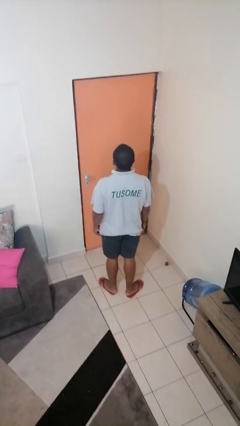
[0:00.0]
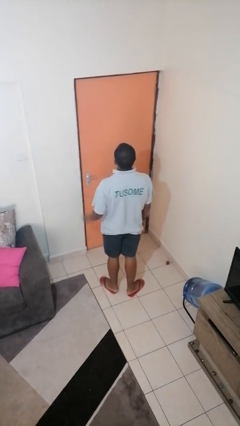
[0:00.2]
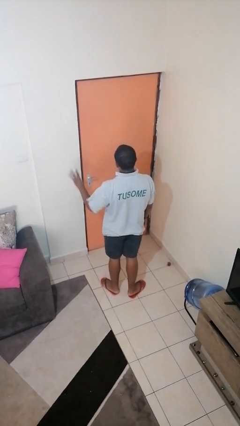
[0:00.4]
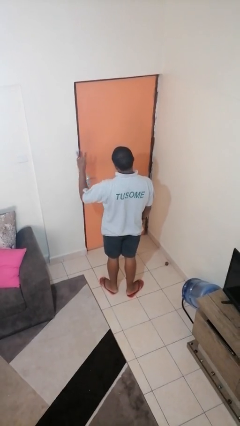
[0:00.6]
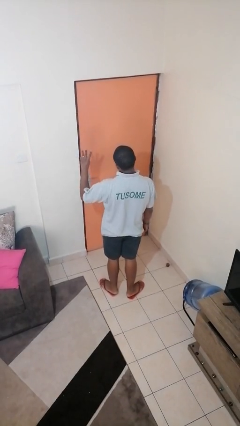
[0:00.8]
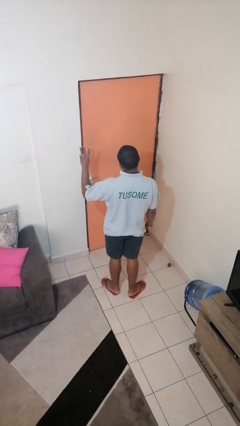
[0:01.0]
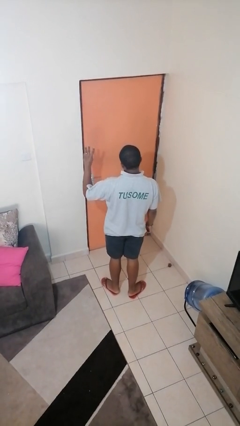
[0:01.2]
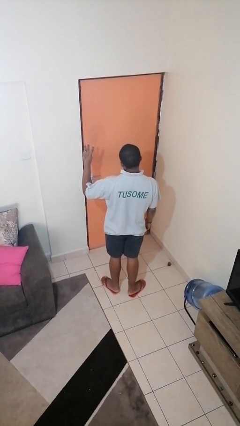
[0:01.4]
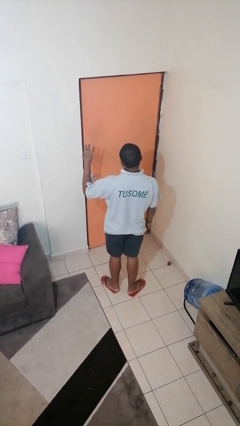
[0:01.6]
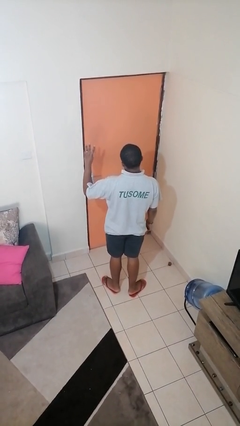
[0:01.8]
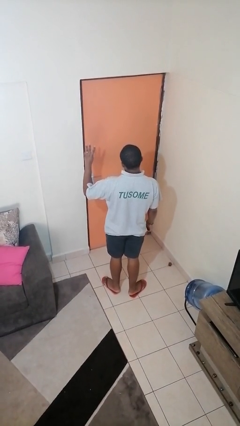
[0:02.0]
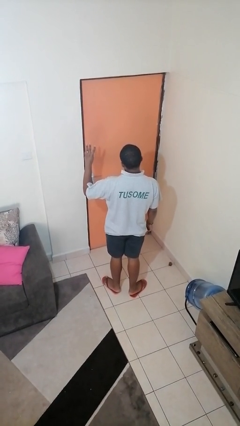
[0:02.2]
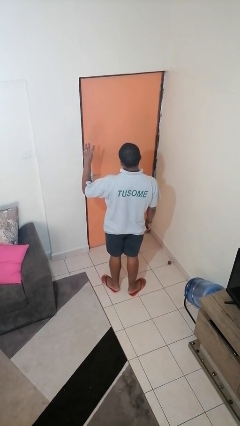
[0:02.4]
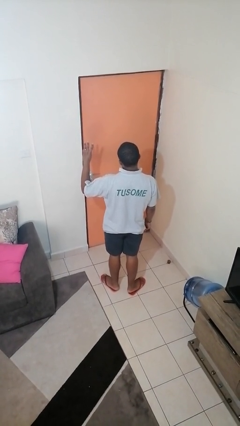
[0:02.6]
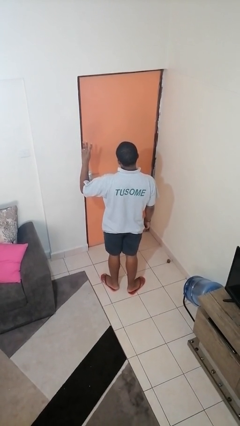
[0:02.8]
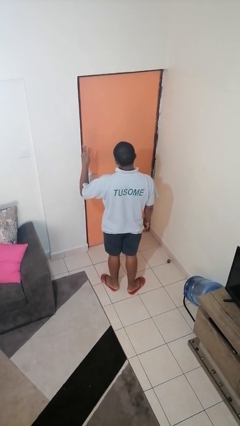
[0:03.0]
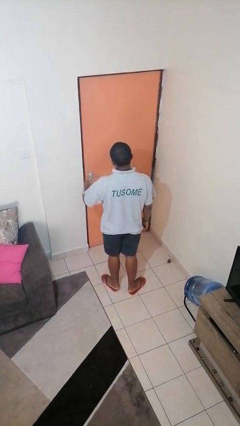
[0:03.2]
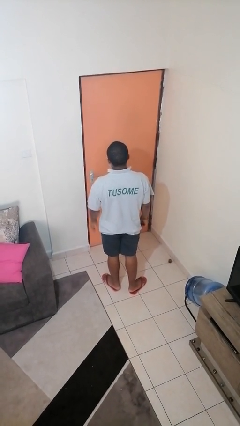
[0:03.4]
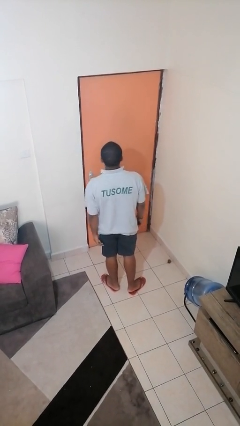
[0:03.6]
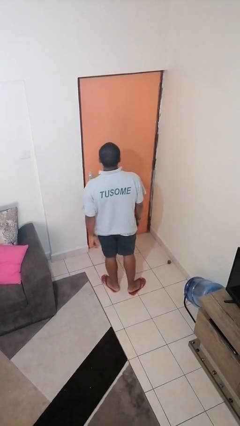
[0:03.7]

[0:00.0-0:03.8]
person gestures number three

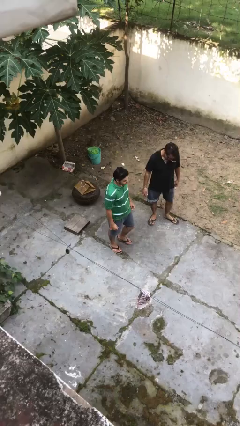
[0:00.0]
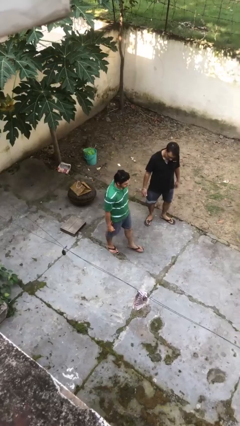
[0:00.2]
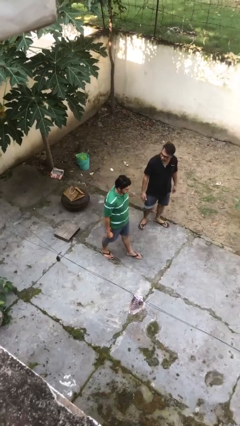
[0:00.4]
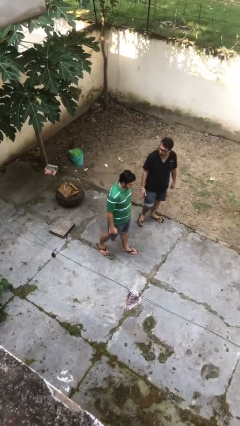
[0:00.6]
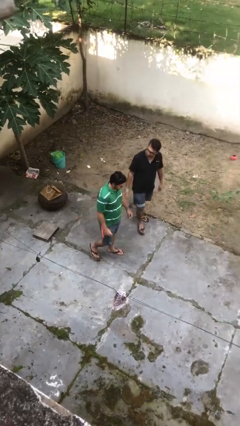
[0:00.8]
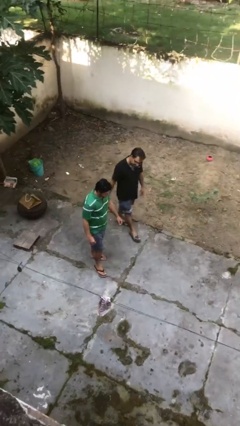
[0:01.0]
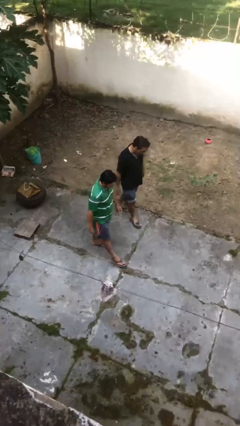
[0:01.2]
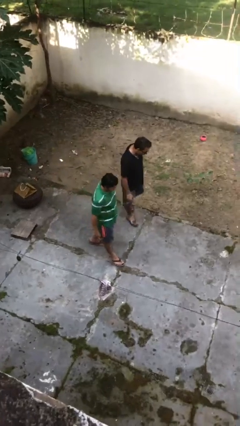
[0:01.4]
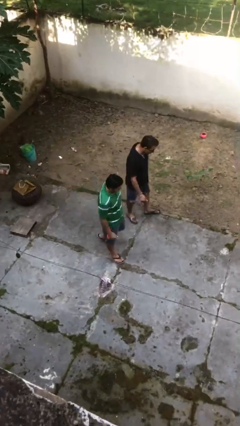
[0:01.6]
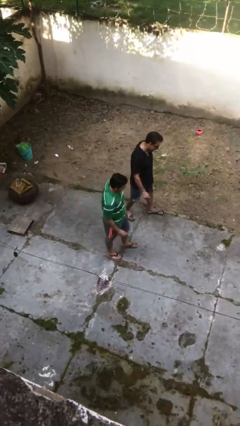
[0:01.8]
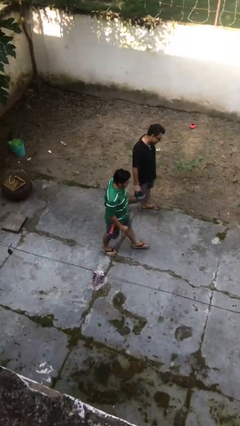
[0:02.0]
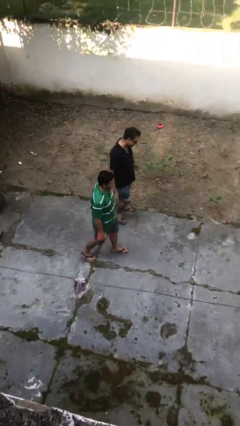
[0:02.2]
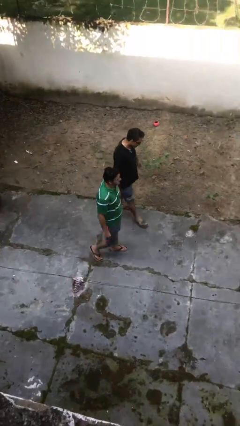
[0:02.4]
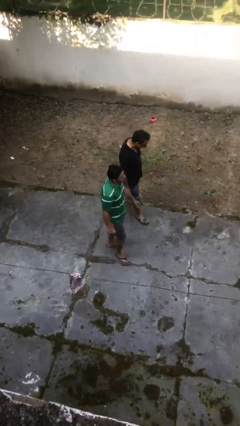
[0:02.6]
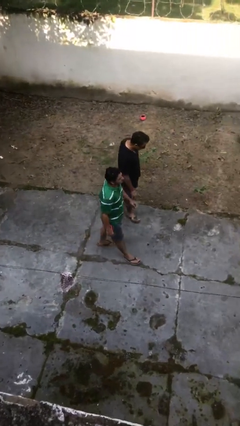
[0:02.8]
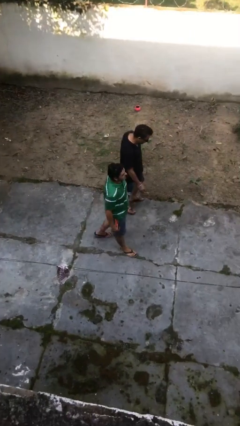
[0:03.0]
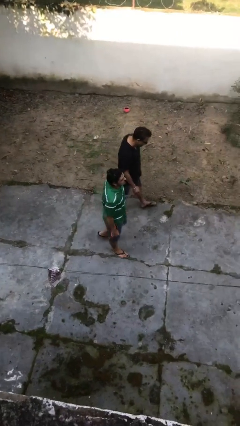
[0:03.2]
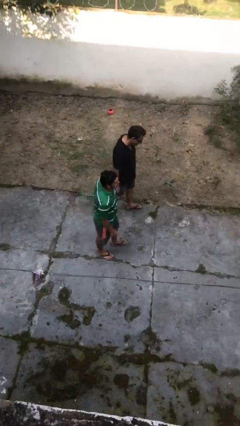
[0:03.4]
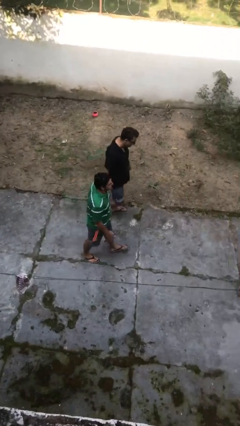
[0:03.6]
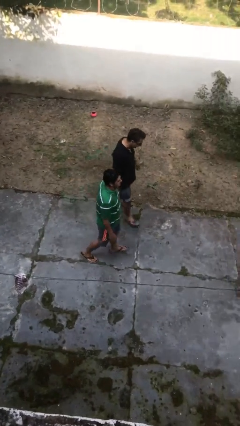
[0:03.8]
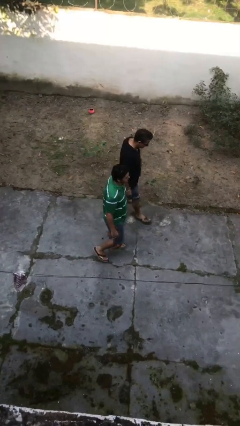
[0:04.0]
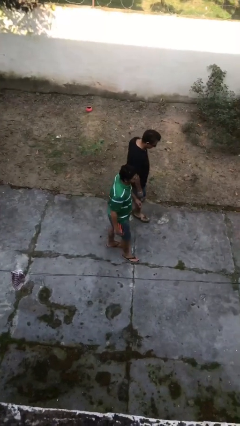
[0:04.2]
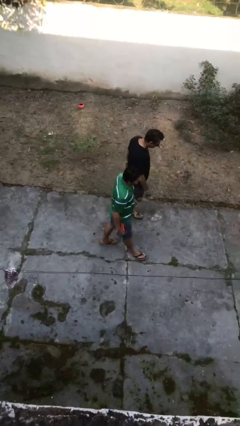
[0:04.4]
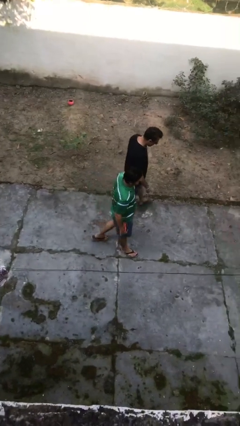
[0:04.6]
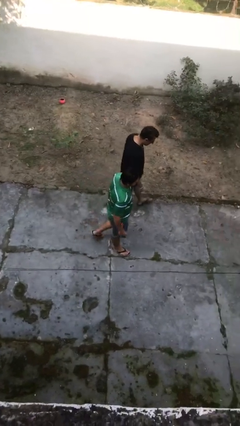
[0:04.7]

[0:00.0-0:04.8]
person talks to person

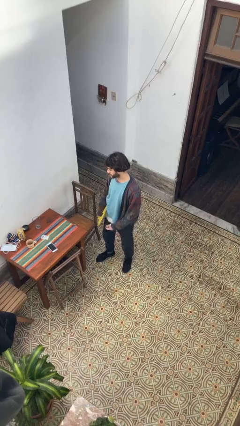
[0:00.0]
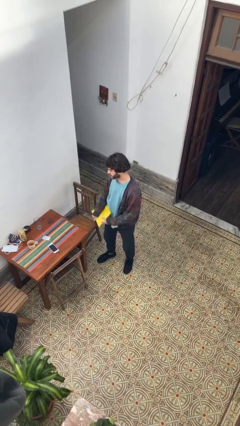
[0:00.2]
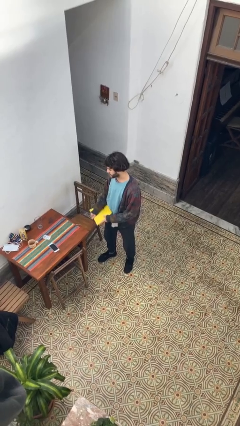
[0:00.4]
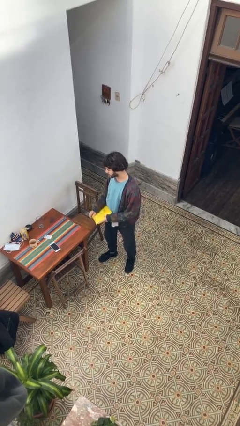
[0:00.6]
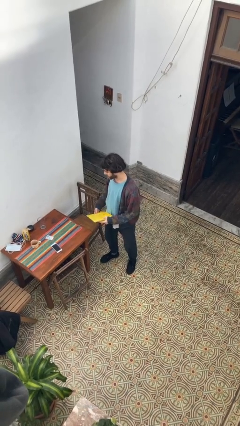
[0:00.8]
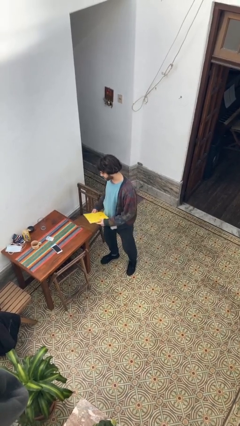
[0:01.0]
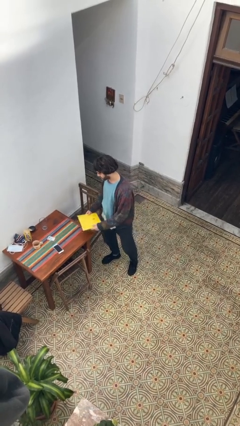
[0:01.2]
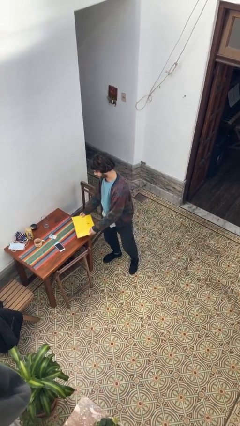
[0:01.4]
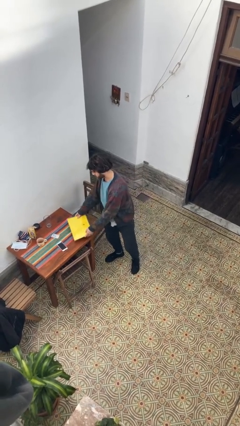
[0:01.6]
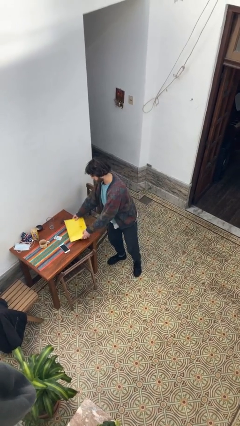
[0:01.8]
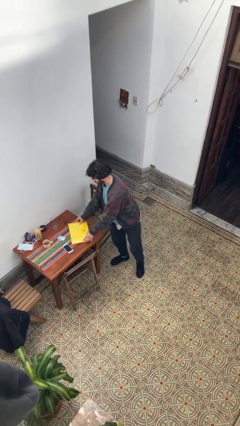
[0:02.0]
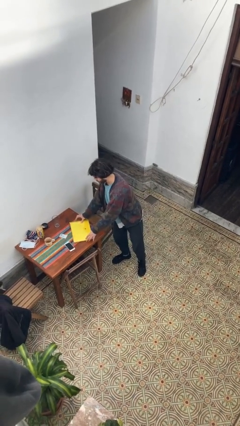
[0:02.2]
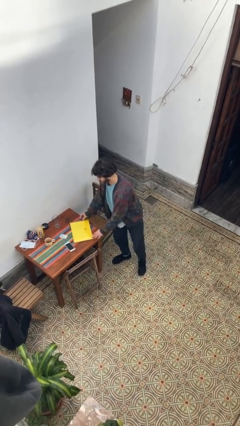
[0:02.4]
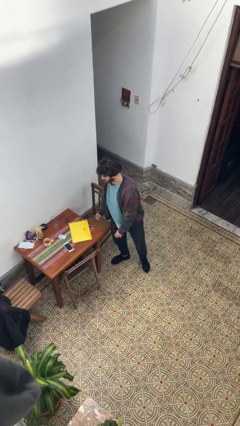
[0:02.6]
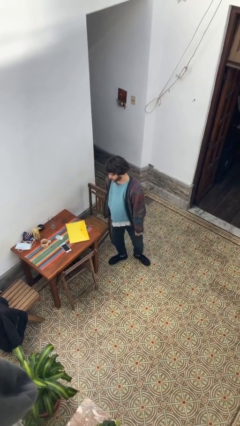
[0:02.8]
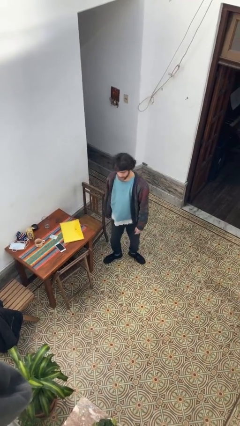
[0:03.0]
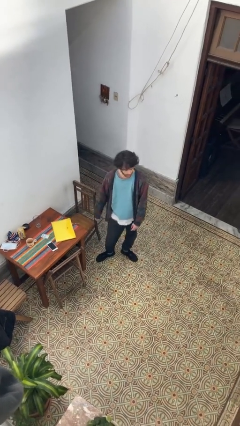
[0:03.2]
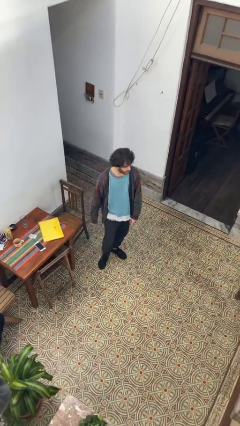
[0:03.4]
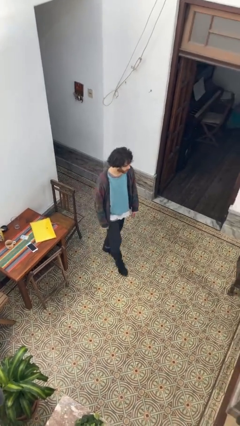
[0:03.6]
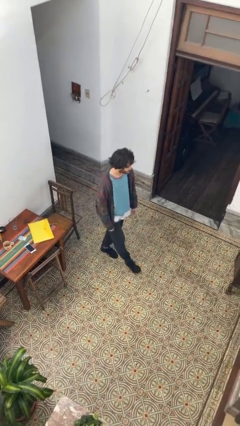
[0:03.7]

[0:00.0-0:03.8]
person puts down object on table

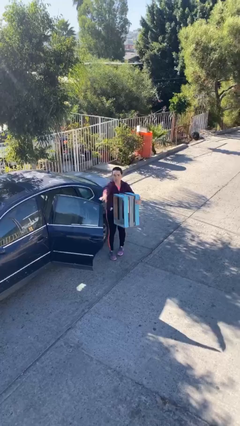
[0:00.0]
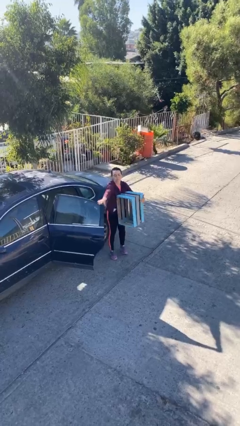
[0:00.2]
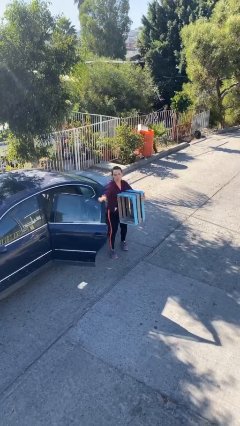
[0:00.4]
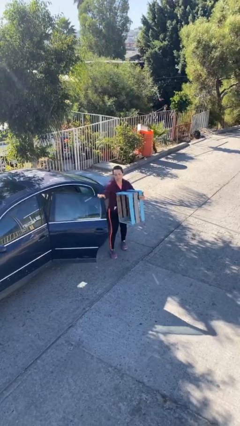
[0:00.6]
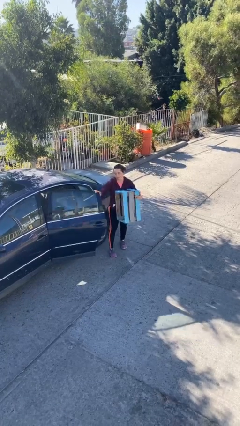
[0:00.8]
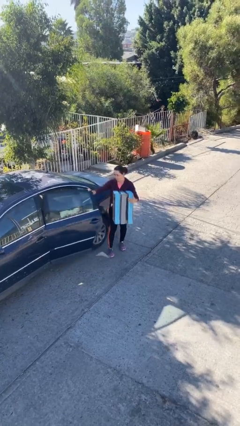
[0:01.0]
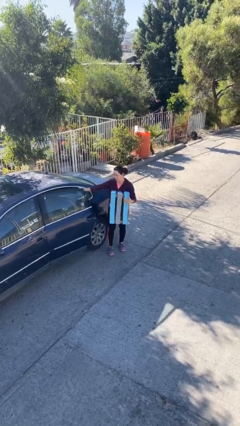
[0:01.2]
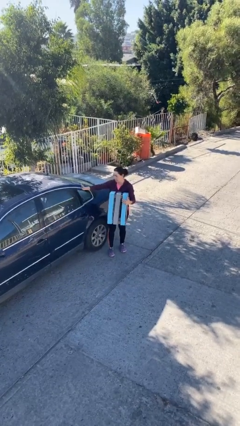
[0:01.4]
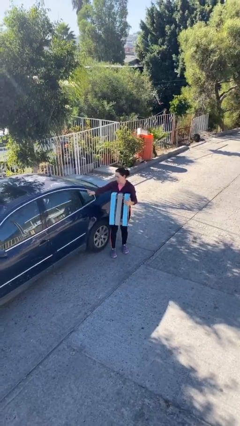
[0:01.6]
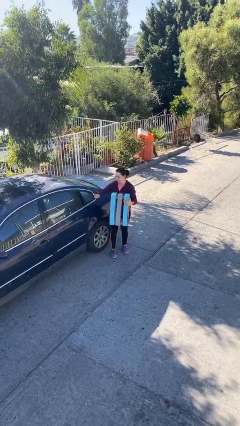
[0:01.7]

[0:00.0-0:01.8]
person closes car door

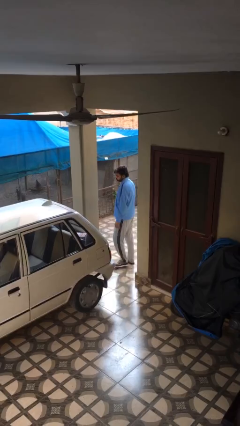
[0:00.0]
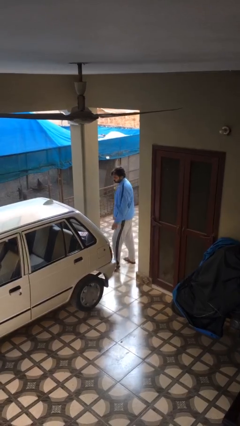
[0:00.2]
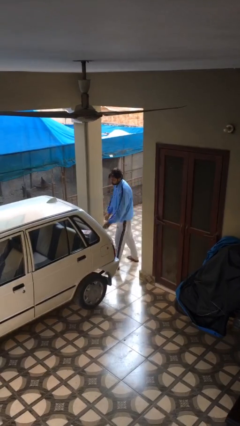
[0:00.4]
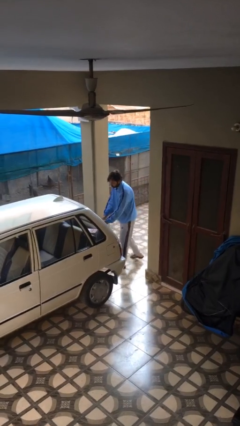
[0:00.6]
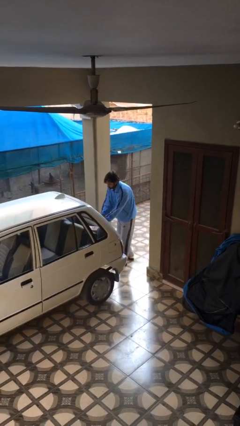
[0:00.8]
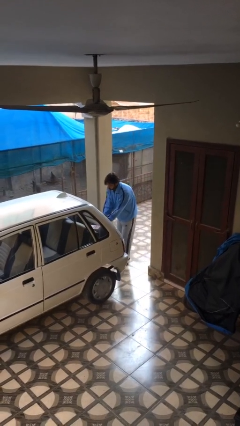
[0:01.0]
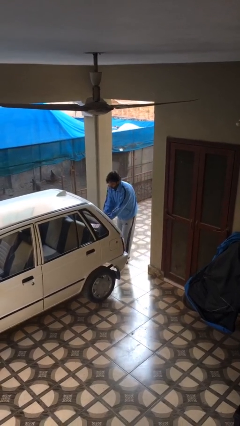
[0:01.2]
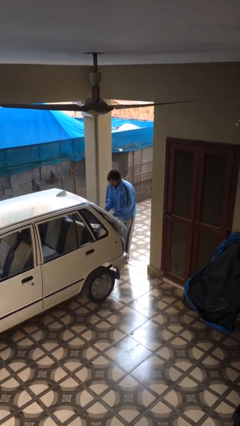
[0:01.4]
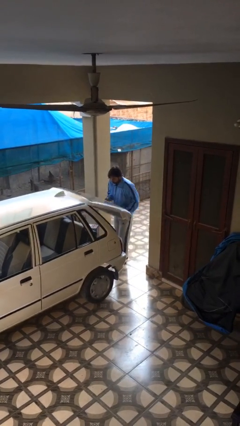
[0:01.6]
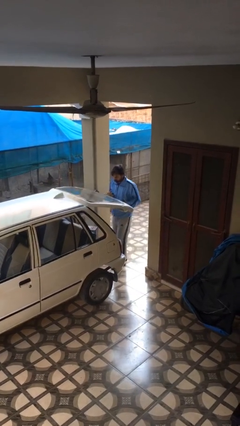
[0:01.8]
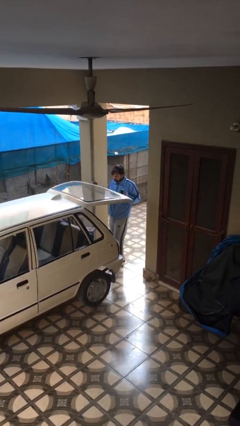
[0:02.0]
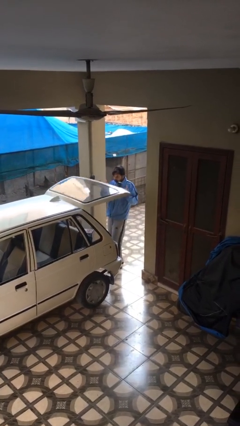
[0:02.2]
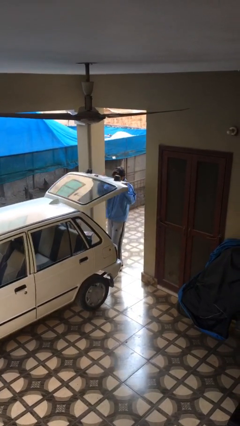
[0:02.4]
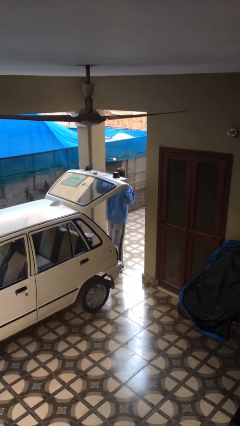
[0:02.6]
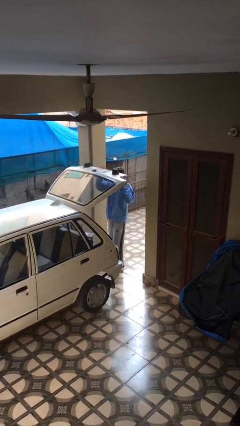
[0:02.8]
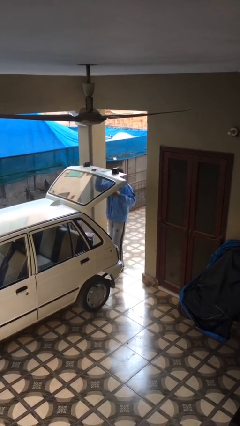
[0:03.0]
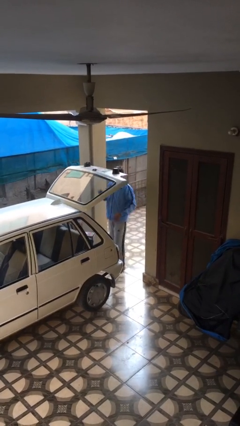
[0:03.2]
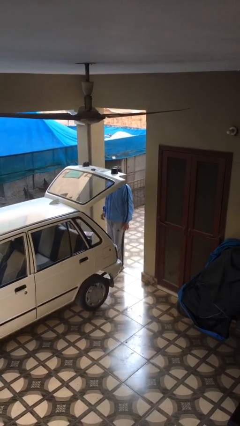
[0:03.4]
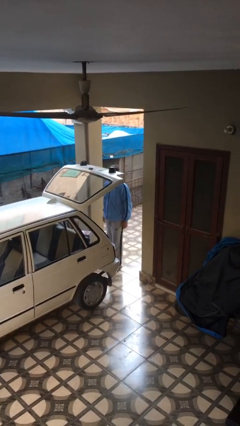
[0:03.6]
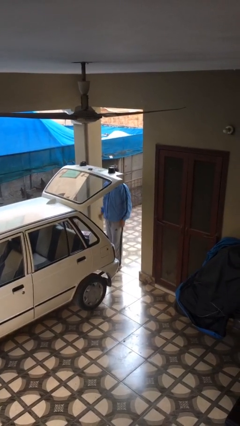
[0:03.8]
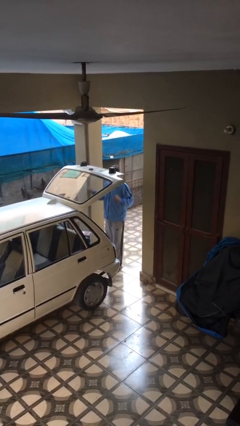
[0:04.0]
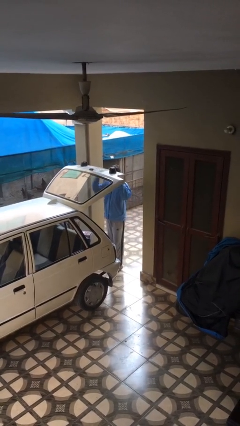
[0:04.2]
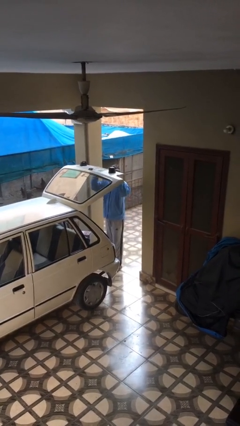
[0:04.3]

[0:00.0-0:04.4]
person opens car trunk
